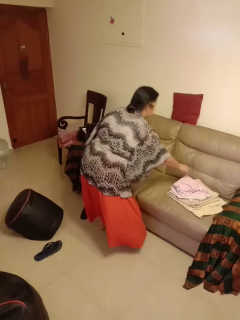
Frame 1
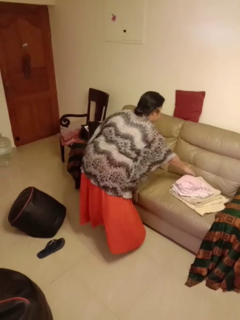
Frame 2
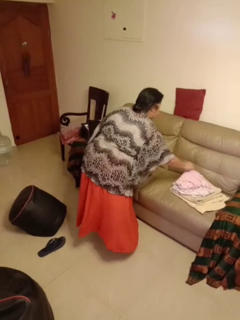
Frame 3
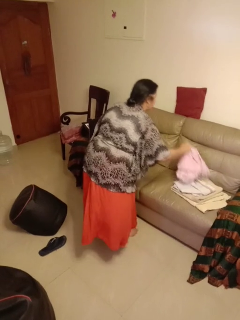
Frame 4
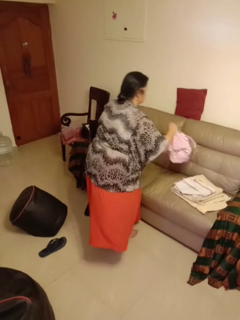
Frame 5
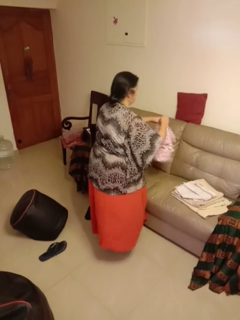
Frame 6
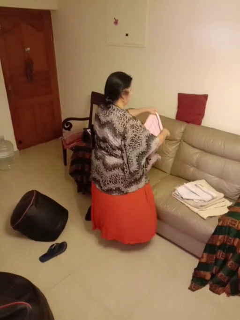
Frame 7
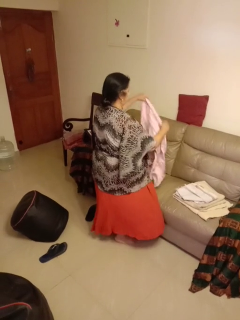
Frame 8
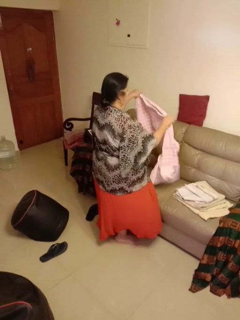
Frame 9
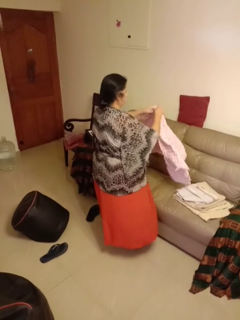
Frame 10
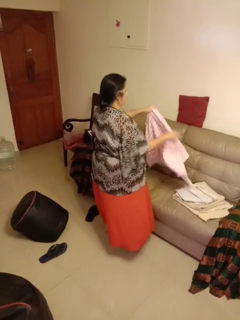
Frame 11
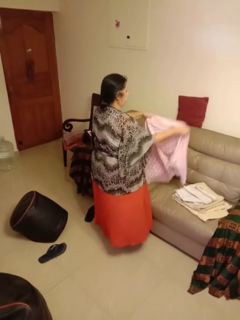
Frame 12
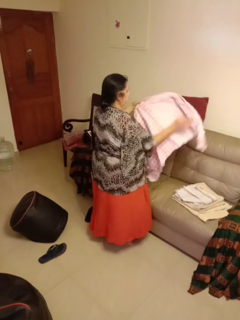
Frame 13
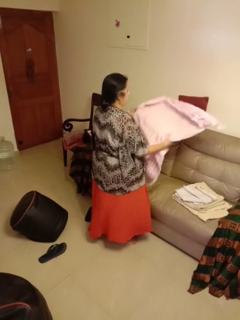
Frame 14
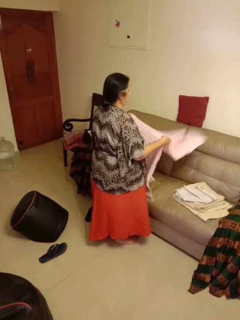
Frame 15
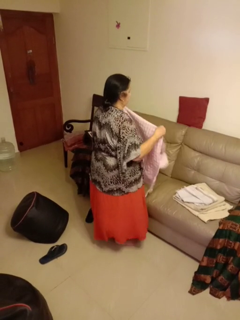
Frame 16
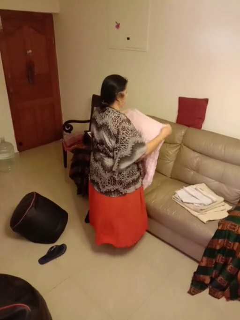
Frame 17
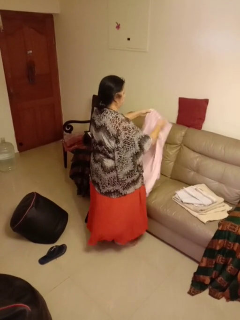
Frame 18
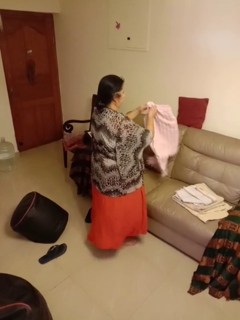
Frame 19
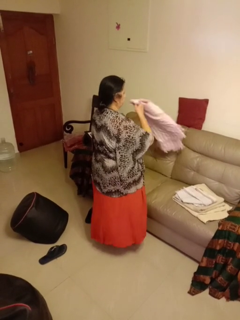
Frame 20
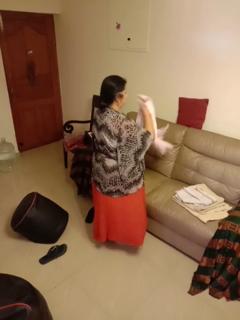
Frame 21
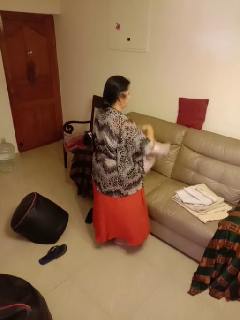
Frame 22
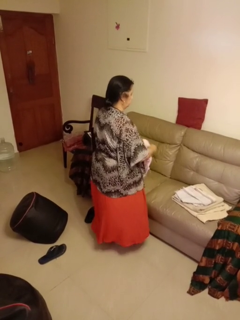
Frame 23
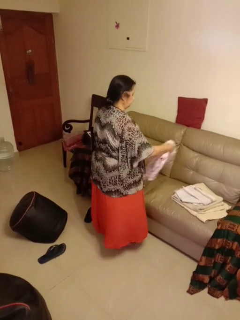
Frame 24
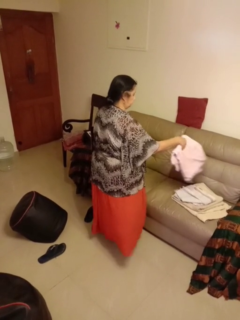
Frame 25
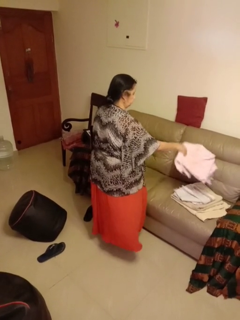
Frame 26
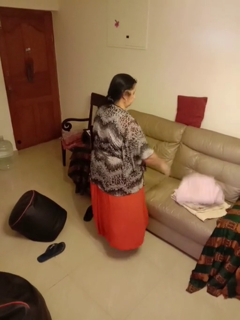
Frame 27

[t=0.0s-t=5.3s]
person folds towel

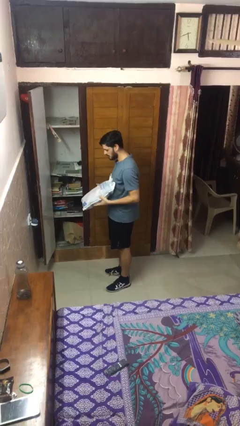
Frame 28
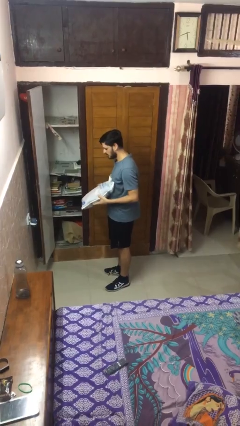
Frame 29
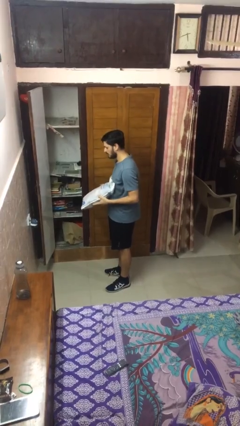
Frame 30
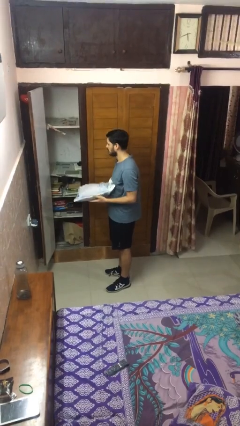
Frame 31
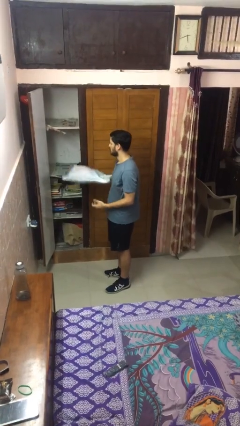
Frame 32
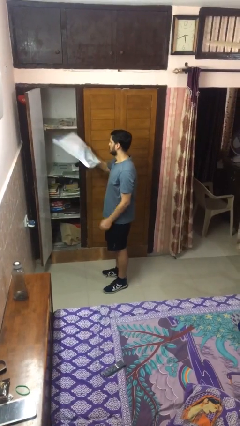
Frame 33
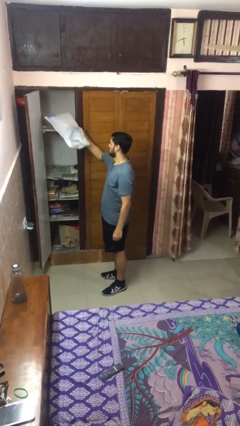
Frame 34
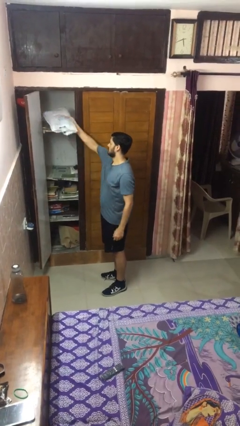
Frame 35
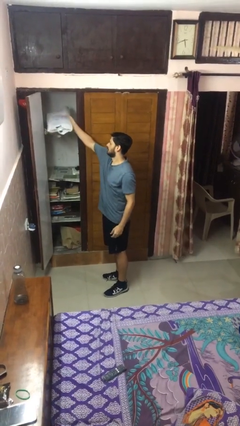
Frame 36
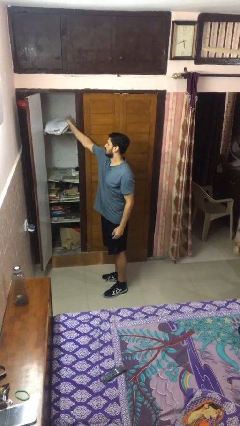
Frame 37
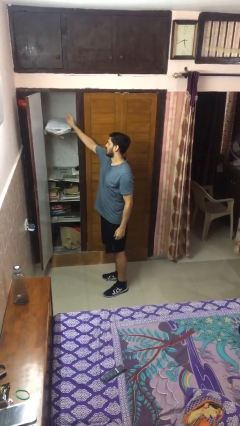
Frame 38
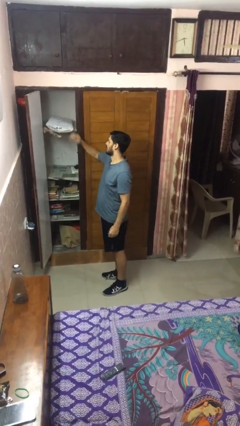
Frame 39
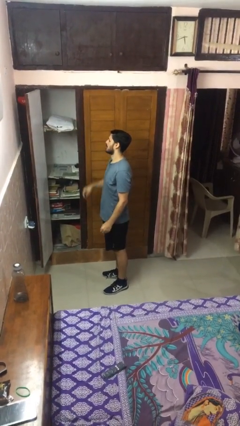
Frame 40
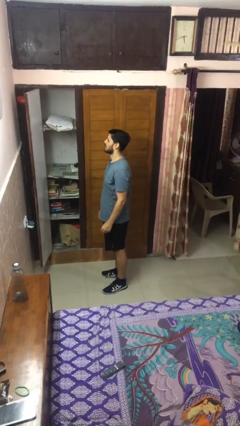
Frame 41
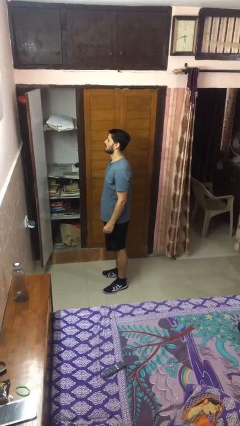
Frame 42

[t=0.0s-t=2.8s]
person puts down object on shelf

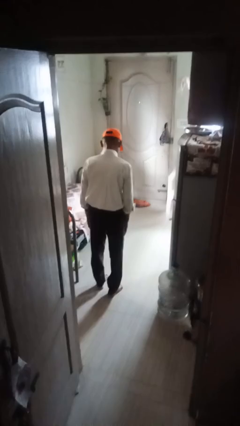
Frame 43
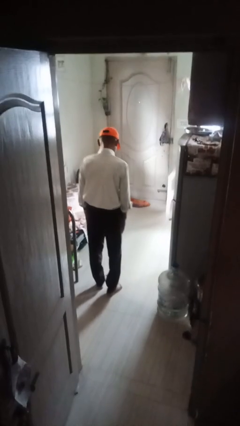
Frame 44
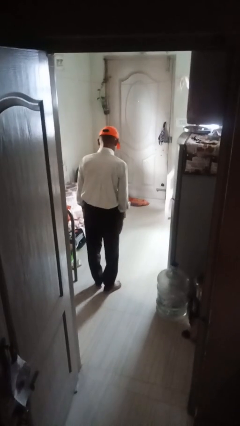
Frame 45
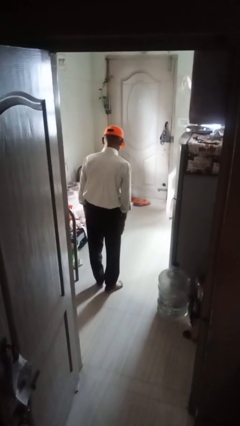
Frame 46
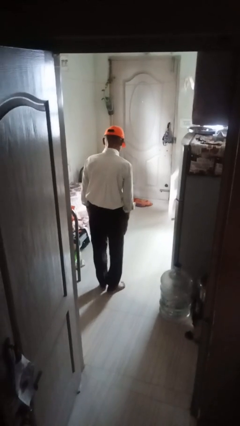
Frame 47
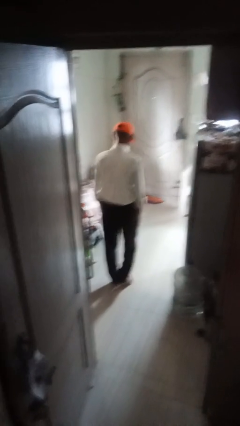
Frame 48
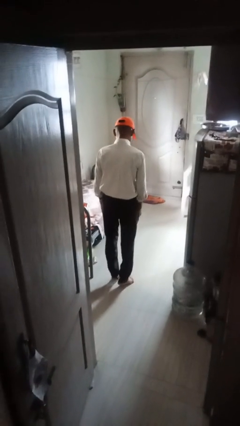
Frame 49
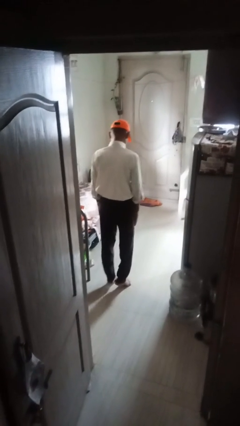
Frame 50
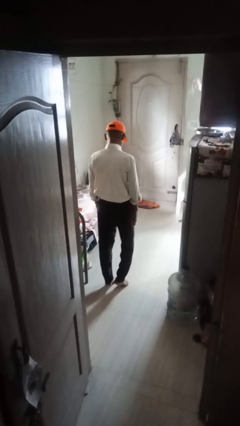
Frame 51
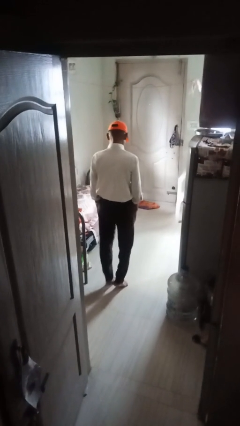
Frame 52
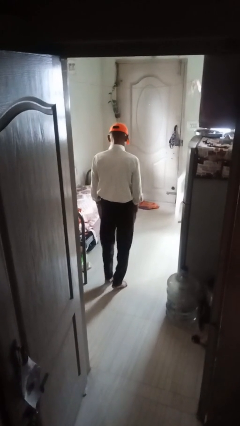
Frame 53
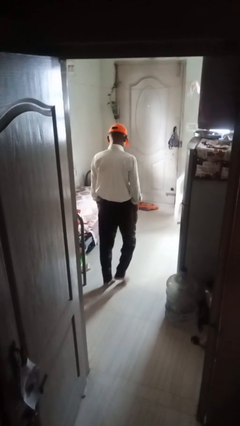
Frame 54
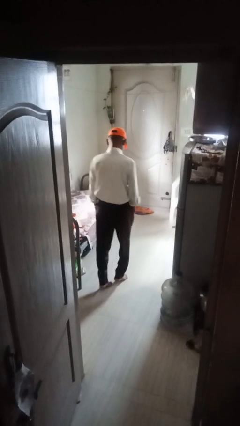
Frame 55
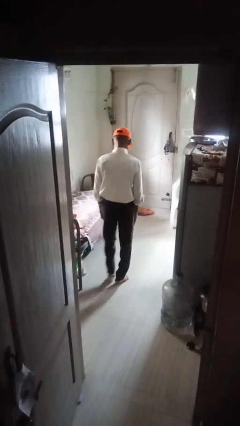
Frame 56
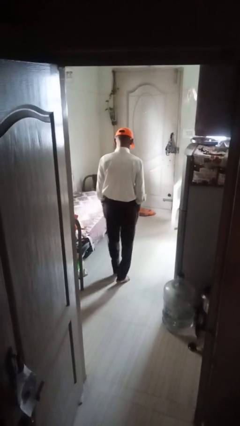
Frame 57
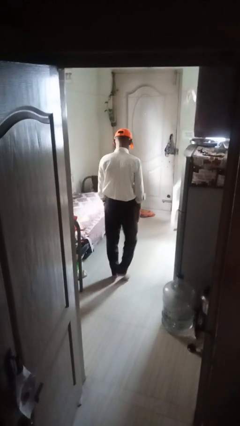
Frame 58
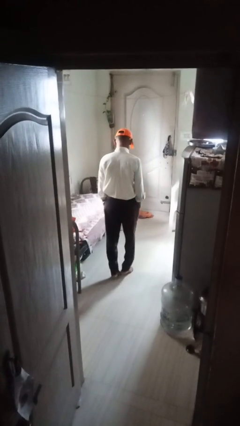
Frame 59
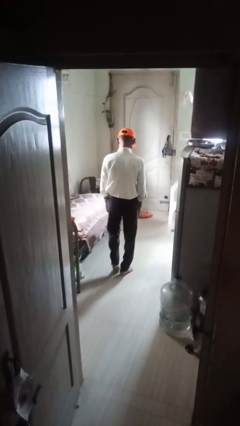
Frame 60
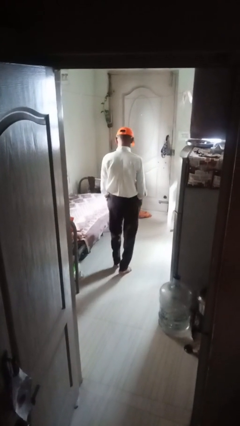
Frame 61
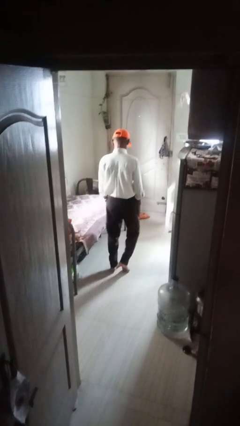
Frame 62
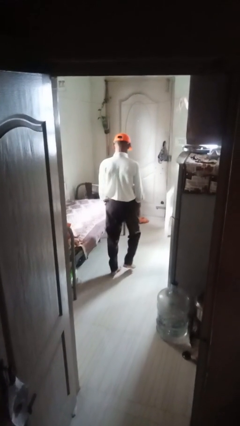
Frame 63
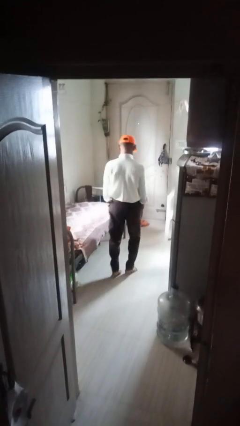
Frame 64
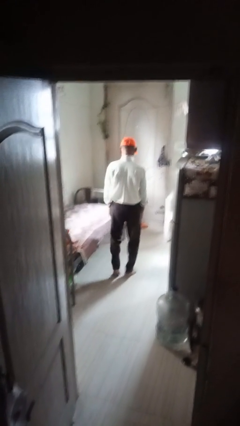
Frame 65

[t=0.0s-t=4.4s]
person walks tiptoe

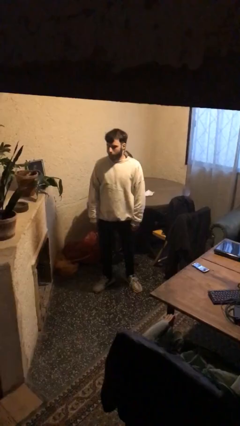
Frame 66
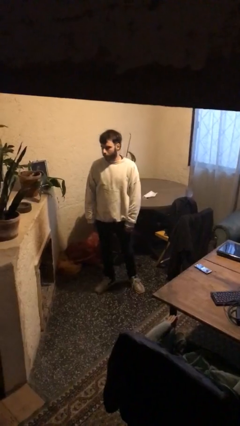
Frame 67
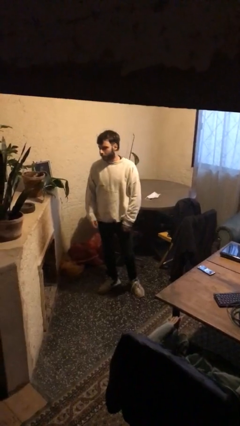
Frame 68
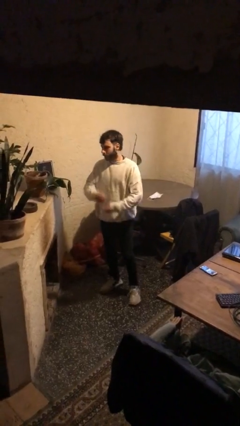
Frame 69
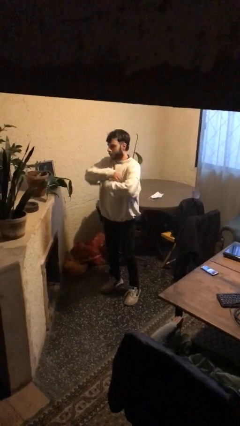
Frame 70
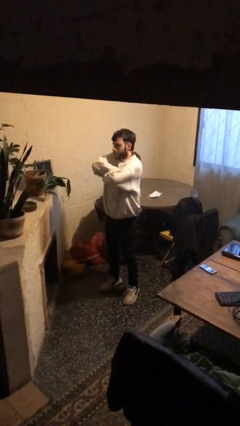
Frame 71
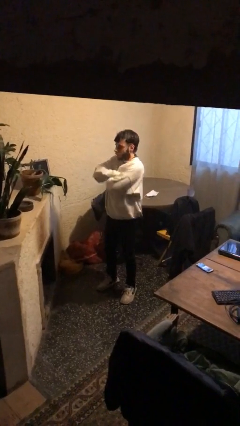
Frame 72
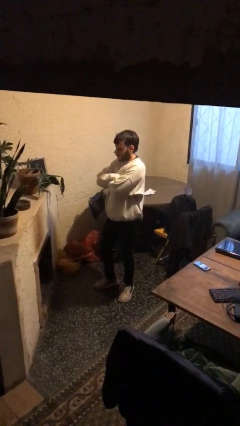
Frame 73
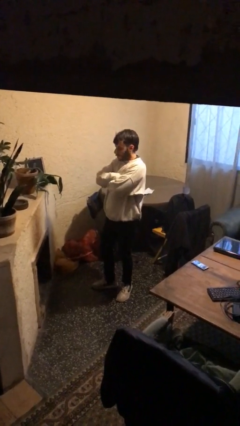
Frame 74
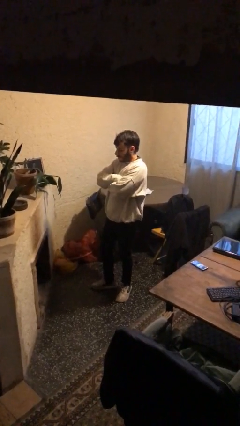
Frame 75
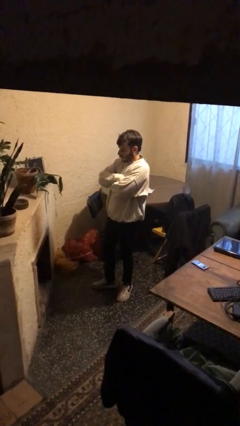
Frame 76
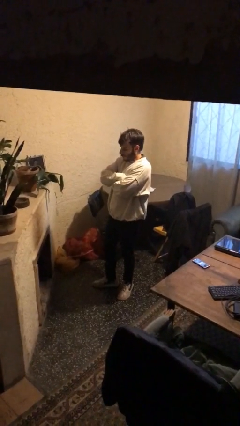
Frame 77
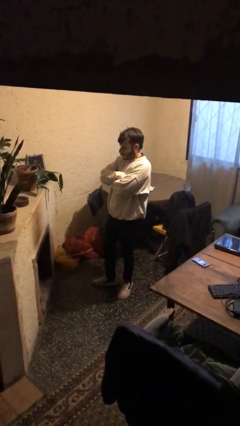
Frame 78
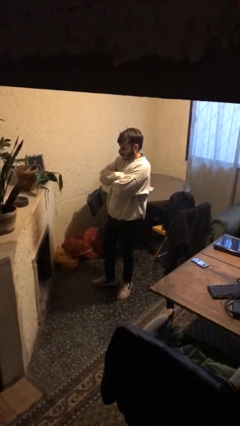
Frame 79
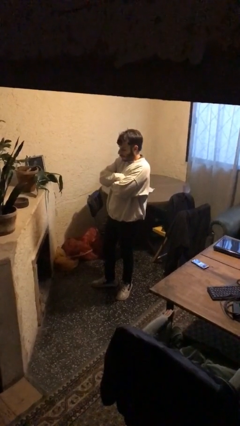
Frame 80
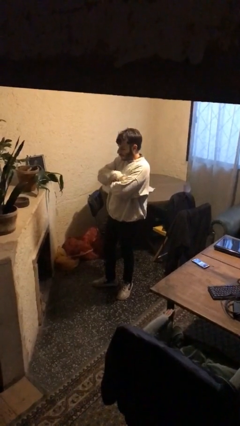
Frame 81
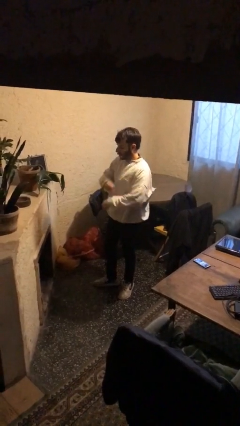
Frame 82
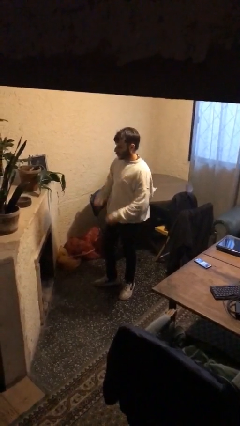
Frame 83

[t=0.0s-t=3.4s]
person crosses arms

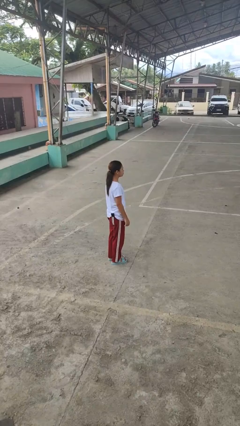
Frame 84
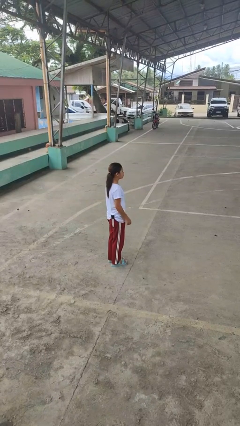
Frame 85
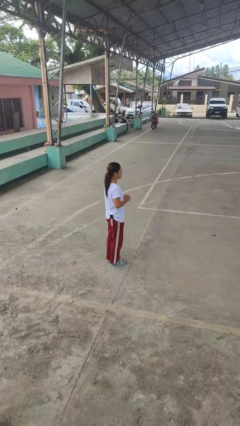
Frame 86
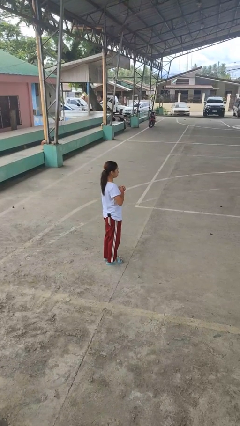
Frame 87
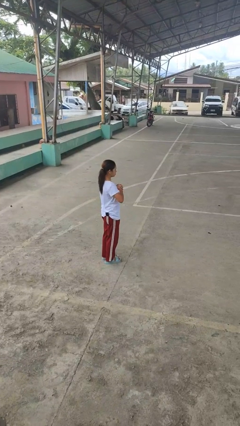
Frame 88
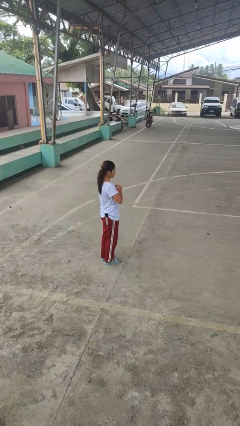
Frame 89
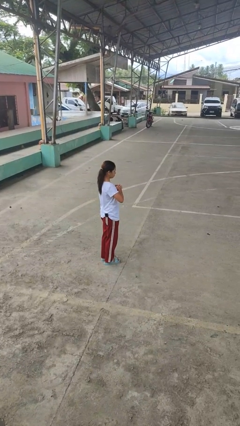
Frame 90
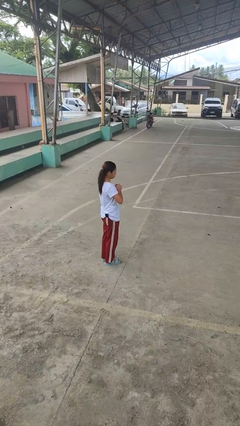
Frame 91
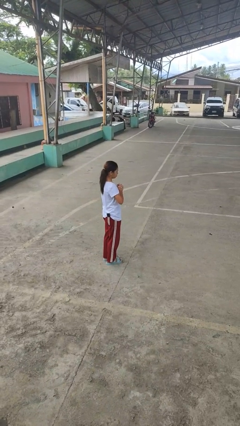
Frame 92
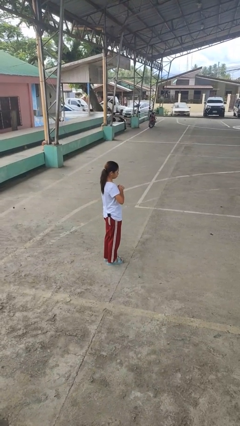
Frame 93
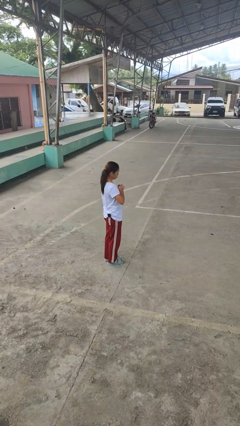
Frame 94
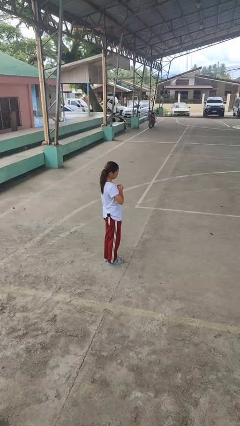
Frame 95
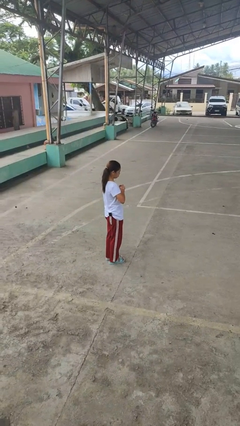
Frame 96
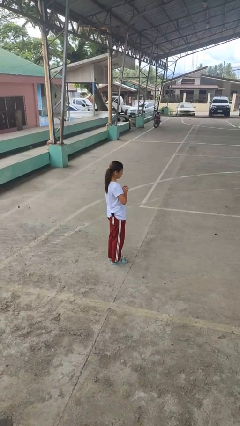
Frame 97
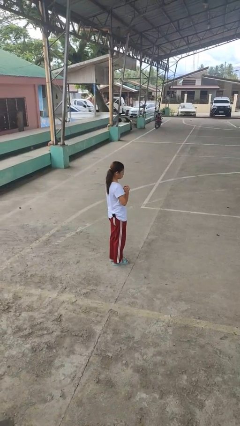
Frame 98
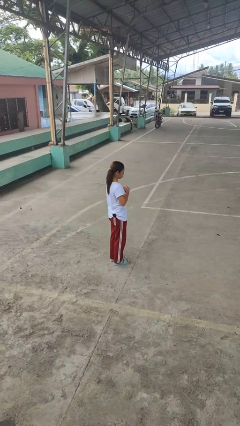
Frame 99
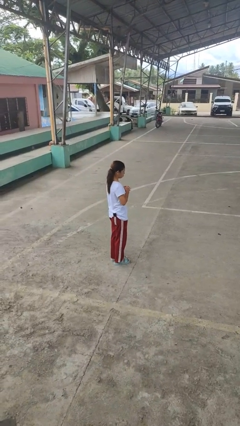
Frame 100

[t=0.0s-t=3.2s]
person cracks knuckles
